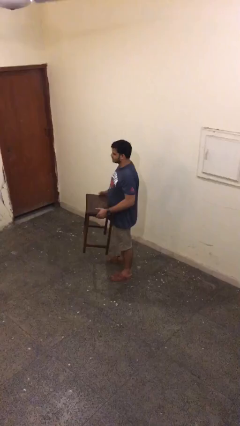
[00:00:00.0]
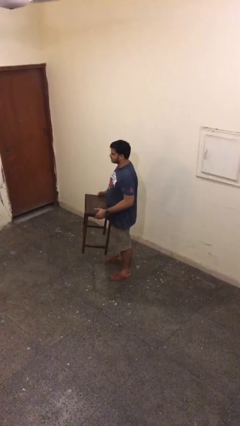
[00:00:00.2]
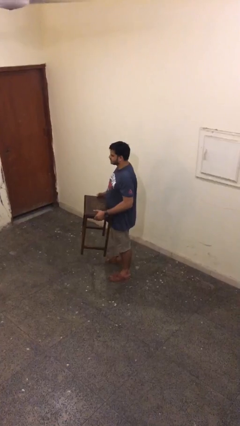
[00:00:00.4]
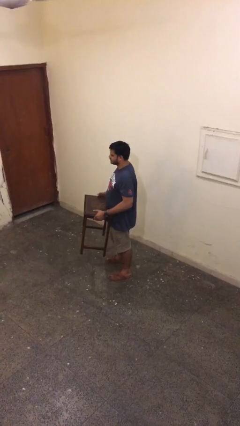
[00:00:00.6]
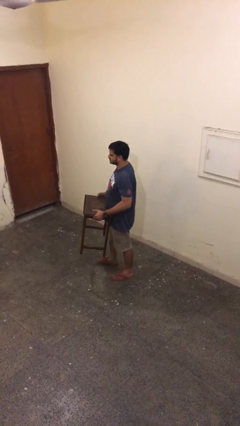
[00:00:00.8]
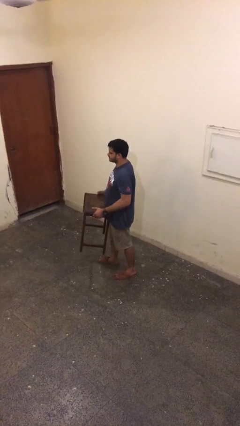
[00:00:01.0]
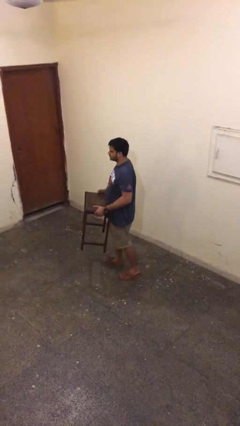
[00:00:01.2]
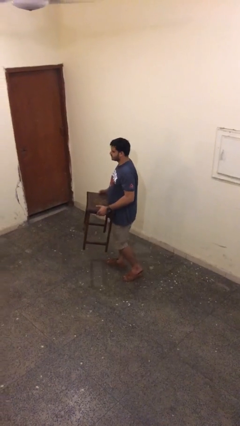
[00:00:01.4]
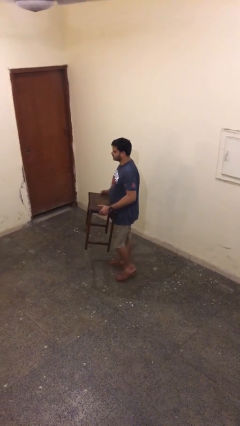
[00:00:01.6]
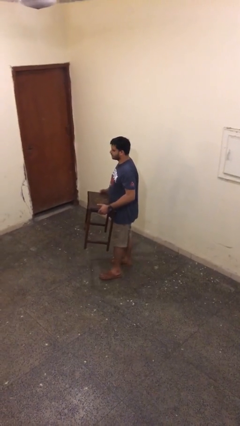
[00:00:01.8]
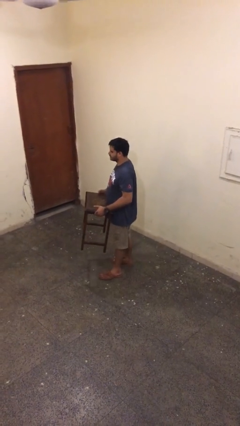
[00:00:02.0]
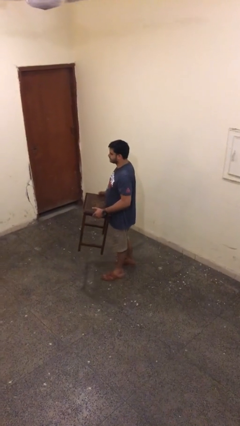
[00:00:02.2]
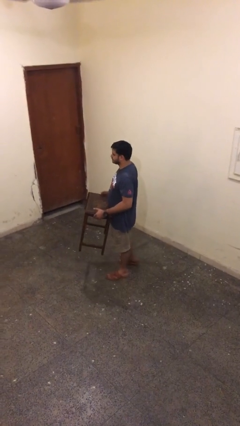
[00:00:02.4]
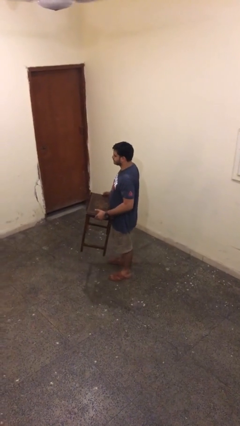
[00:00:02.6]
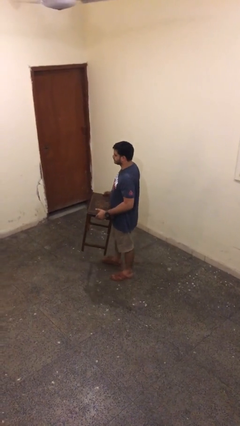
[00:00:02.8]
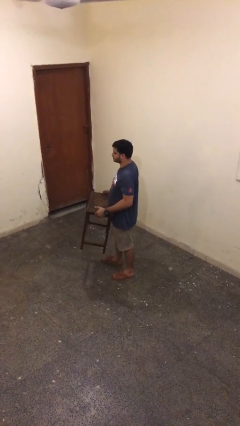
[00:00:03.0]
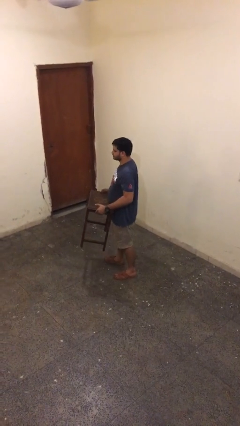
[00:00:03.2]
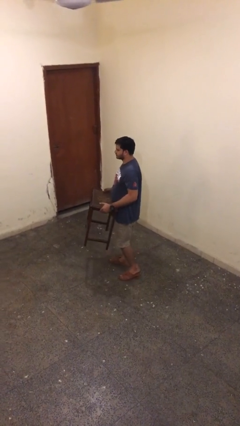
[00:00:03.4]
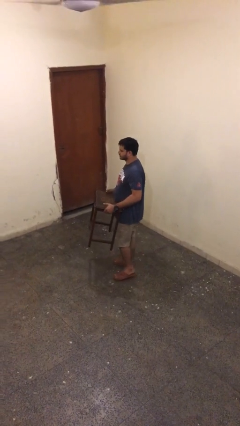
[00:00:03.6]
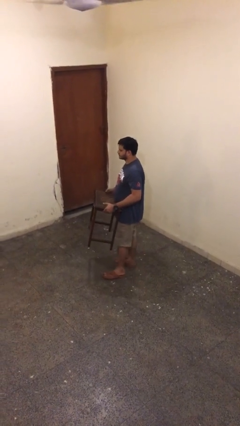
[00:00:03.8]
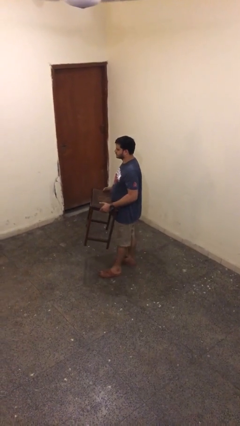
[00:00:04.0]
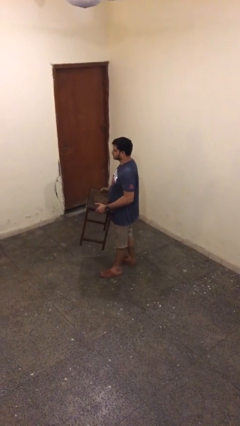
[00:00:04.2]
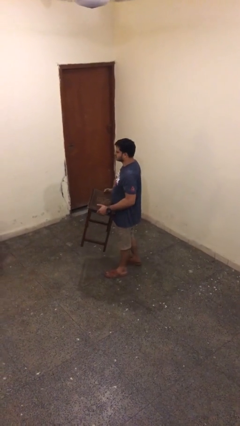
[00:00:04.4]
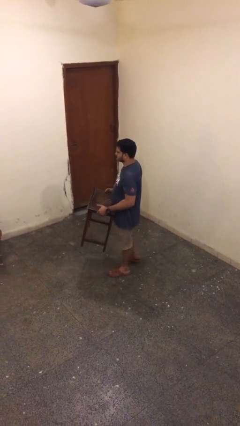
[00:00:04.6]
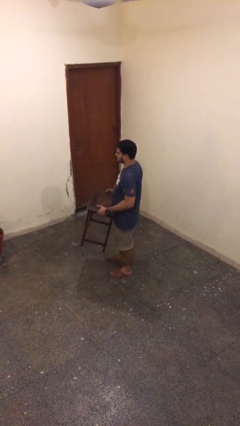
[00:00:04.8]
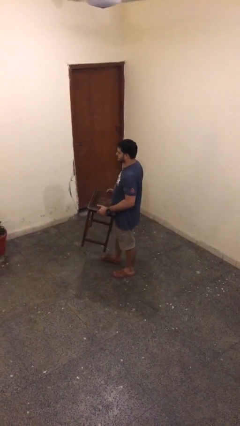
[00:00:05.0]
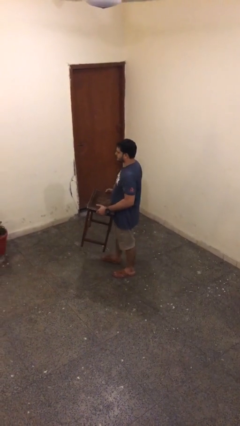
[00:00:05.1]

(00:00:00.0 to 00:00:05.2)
person carries heavy object

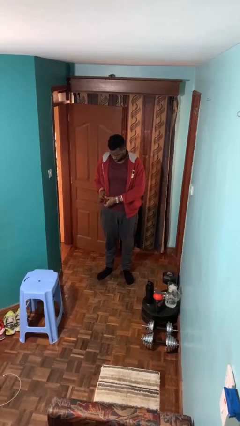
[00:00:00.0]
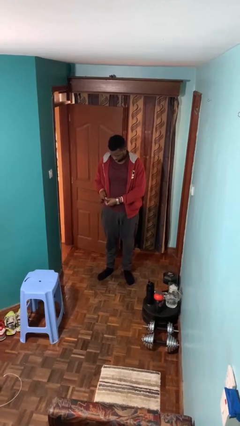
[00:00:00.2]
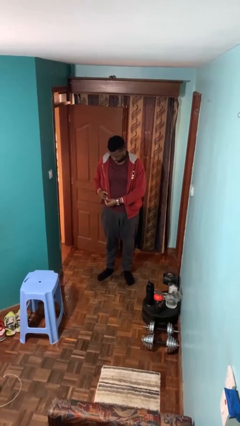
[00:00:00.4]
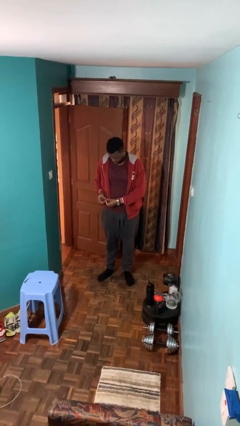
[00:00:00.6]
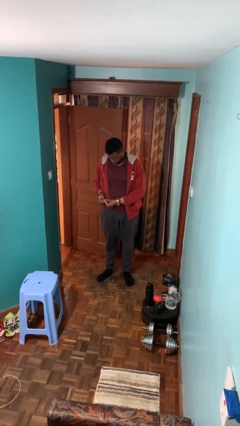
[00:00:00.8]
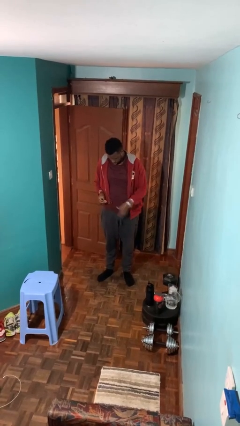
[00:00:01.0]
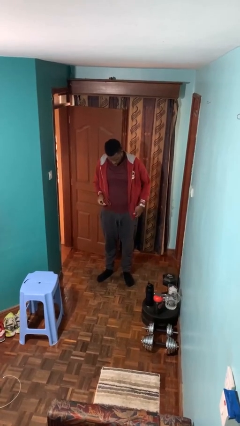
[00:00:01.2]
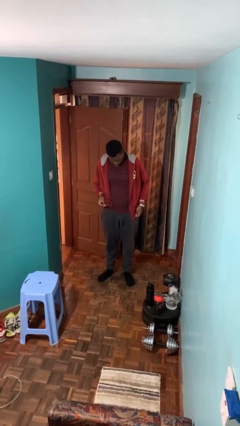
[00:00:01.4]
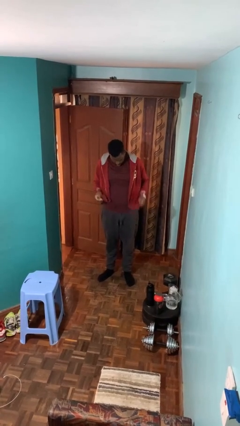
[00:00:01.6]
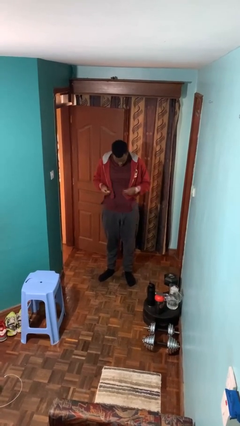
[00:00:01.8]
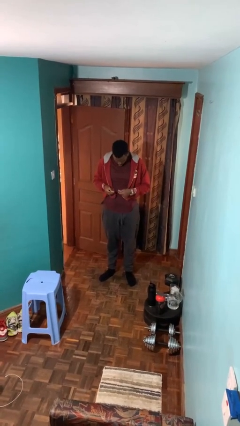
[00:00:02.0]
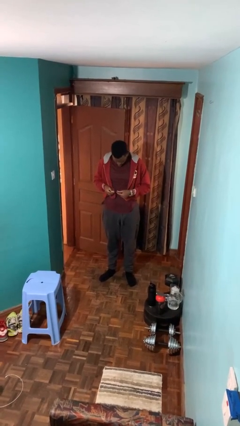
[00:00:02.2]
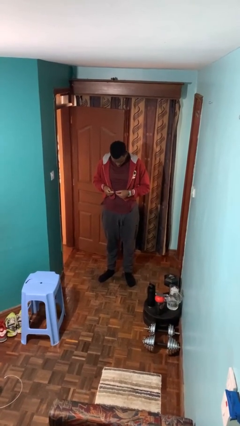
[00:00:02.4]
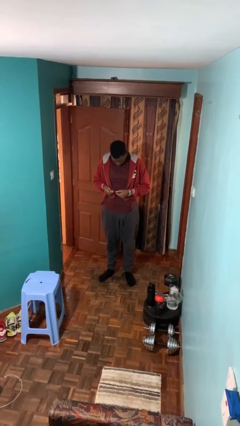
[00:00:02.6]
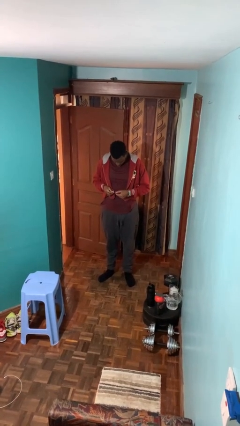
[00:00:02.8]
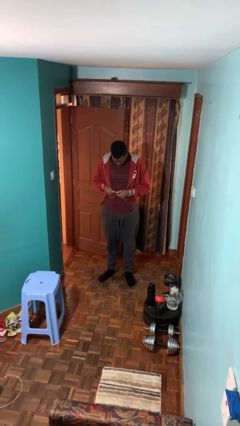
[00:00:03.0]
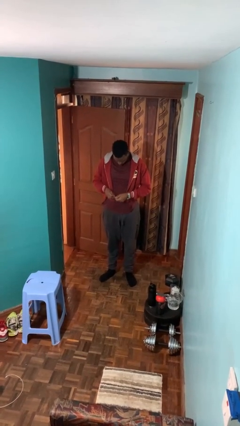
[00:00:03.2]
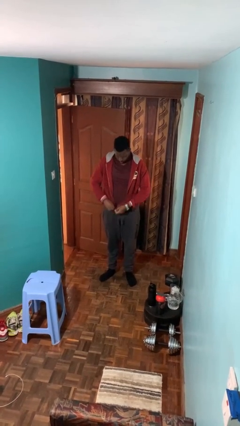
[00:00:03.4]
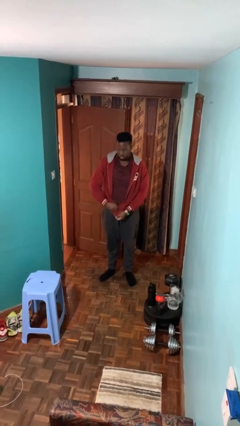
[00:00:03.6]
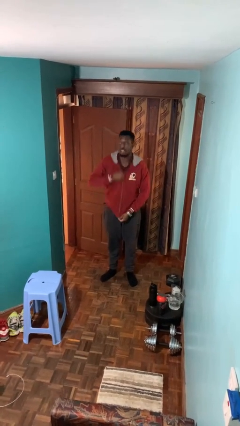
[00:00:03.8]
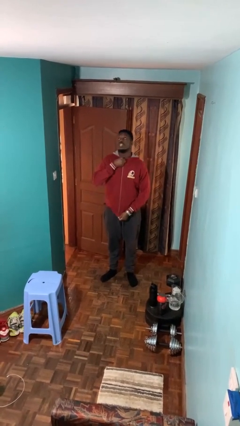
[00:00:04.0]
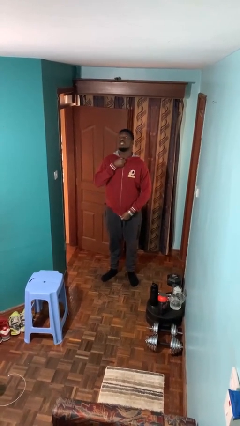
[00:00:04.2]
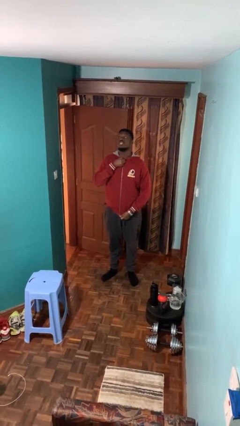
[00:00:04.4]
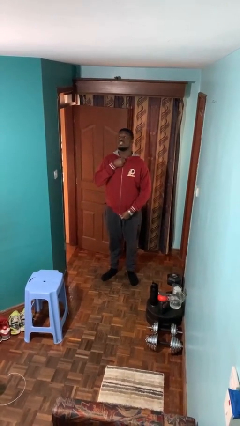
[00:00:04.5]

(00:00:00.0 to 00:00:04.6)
person zips up jacket

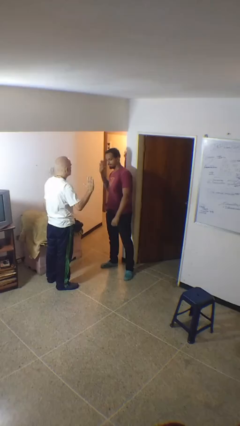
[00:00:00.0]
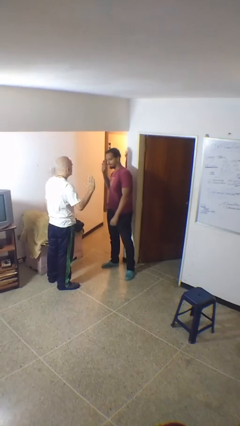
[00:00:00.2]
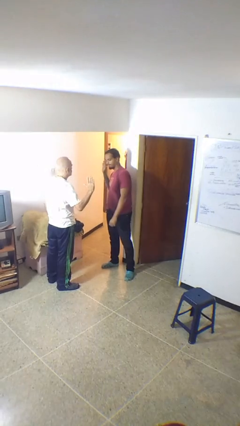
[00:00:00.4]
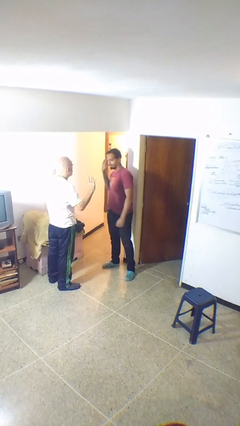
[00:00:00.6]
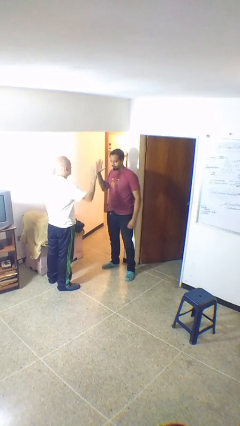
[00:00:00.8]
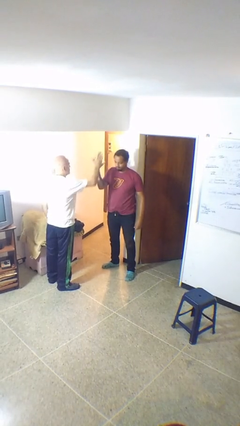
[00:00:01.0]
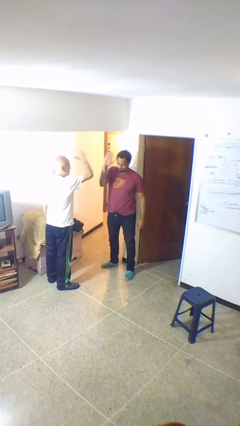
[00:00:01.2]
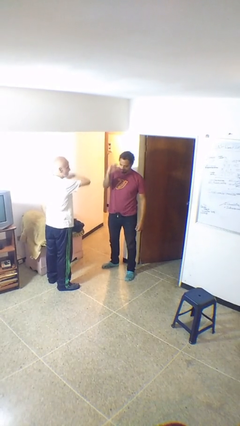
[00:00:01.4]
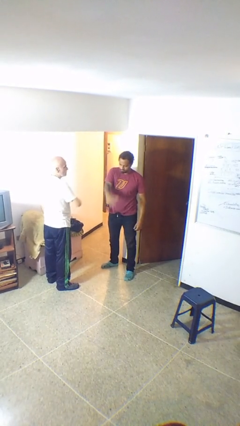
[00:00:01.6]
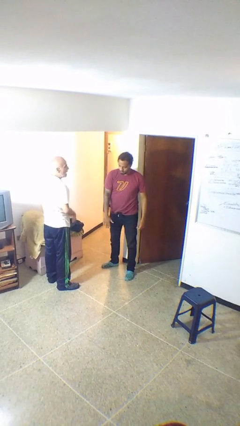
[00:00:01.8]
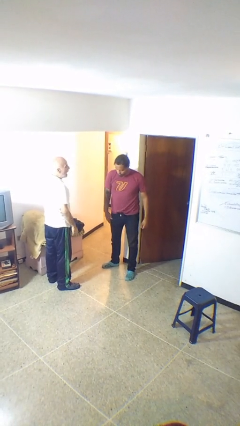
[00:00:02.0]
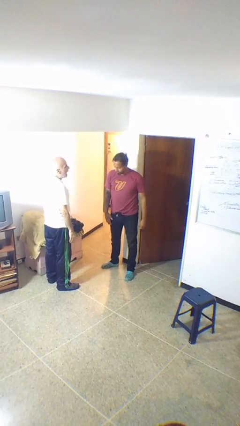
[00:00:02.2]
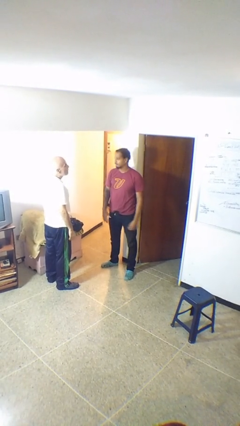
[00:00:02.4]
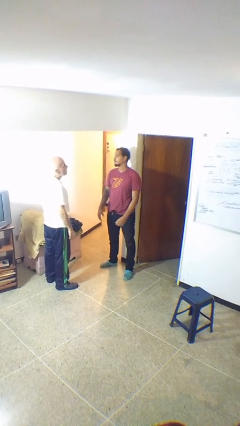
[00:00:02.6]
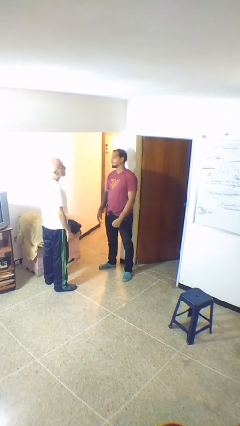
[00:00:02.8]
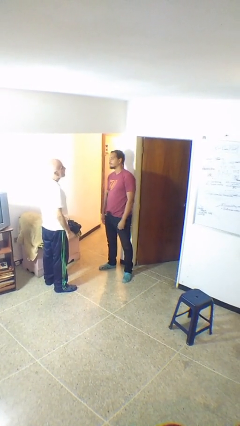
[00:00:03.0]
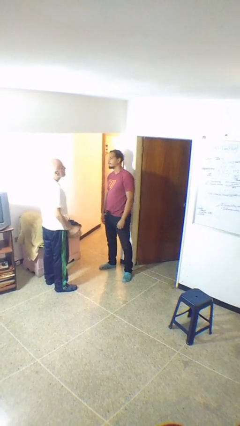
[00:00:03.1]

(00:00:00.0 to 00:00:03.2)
person highfives hand

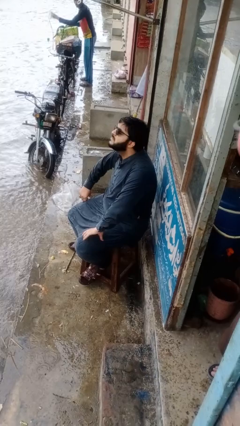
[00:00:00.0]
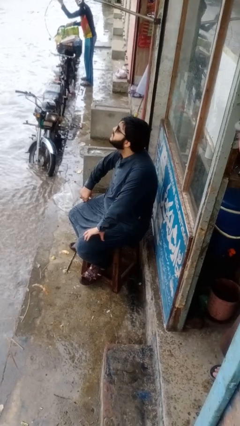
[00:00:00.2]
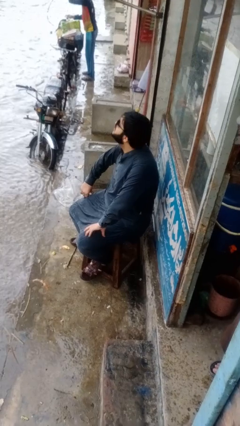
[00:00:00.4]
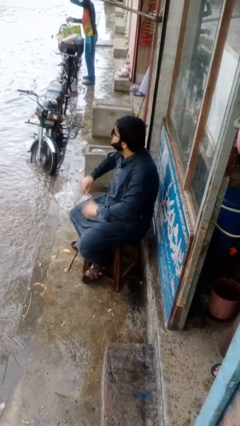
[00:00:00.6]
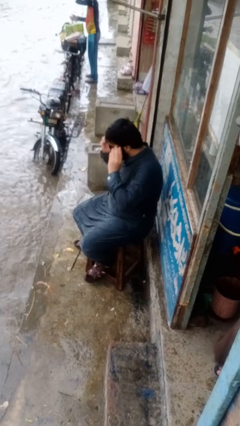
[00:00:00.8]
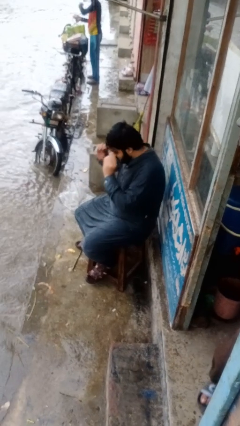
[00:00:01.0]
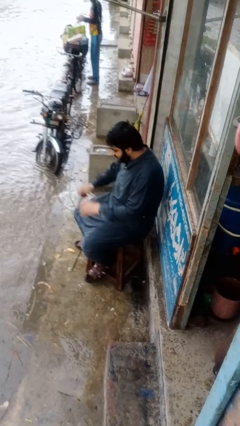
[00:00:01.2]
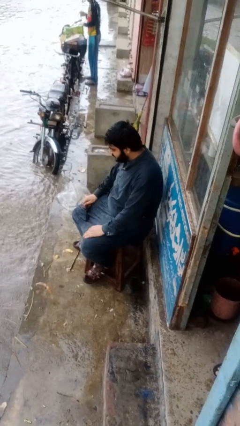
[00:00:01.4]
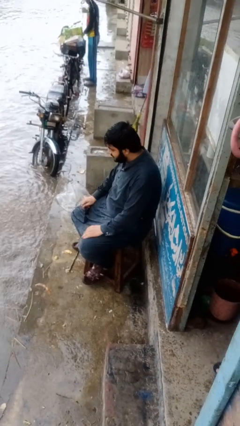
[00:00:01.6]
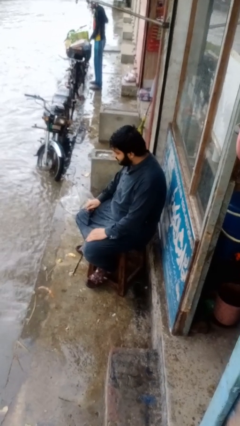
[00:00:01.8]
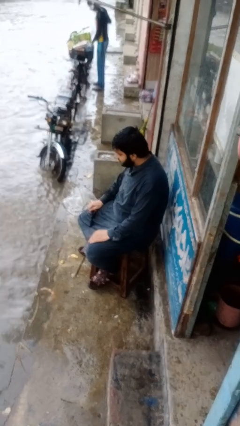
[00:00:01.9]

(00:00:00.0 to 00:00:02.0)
person takes off glasses

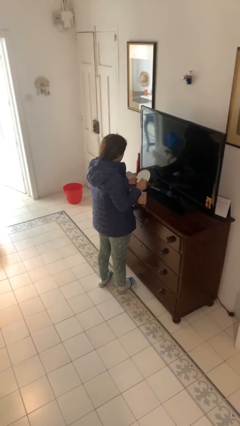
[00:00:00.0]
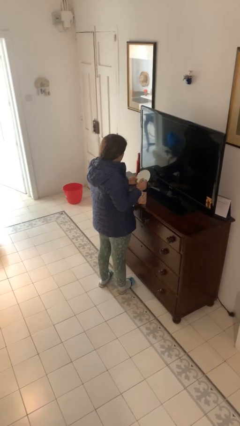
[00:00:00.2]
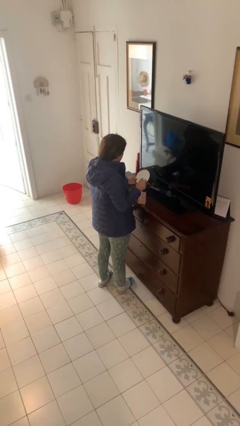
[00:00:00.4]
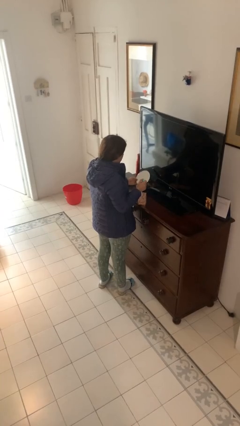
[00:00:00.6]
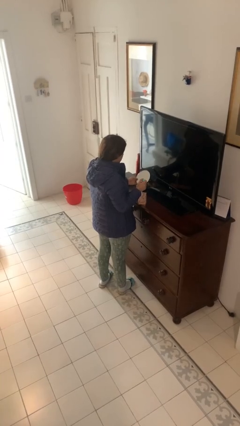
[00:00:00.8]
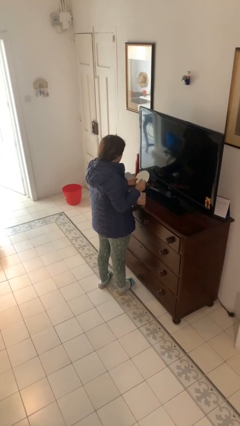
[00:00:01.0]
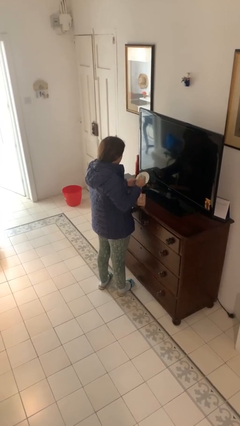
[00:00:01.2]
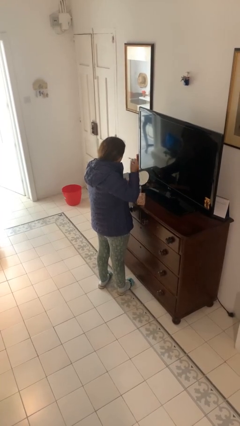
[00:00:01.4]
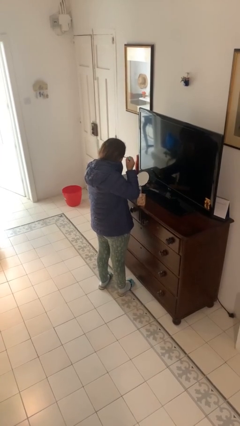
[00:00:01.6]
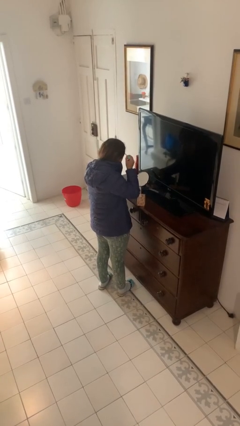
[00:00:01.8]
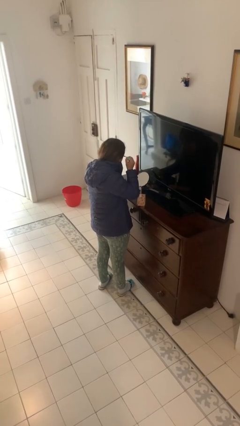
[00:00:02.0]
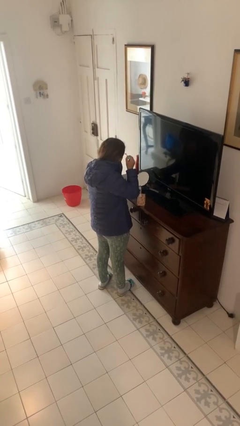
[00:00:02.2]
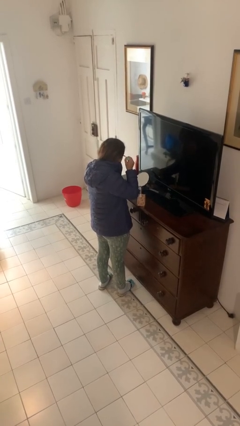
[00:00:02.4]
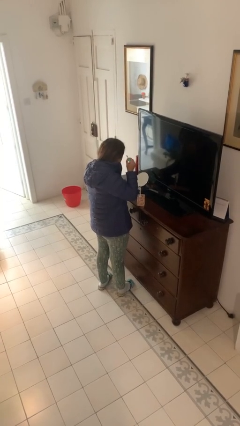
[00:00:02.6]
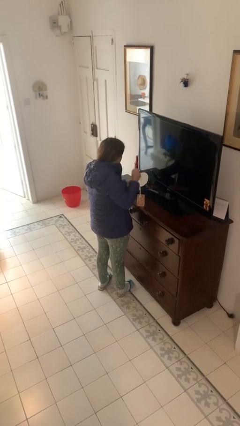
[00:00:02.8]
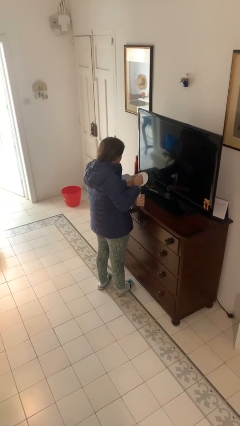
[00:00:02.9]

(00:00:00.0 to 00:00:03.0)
person applies eye makeup
